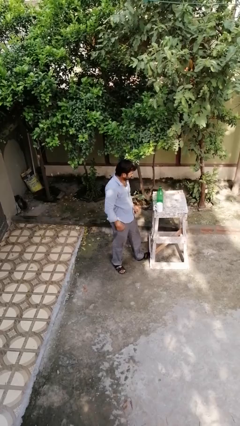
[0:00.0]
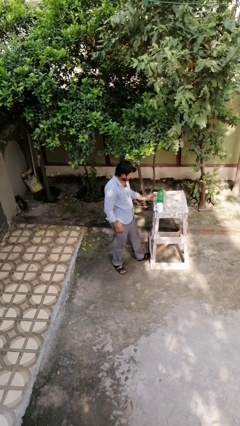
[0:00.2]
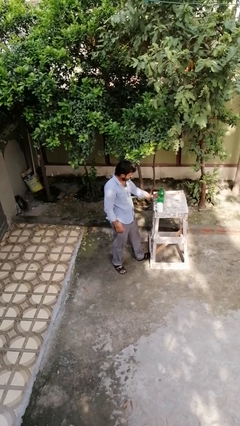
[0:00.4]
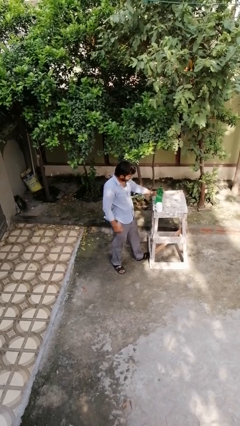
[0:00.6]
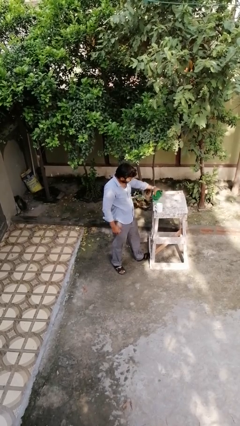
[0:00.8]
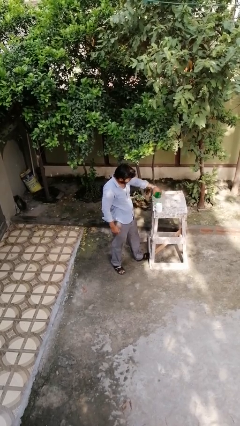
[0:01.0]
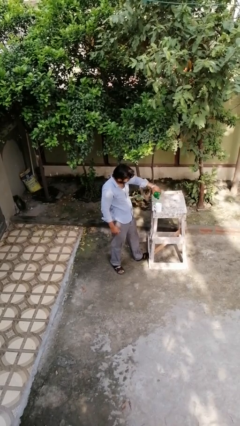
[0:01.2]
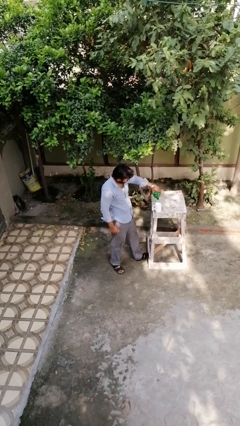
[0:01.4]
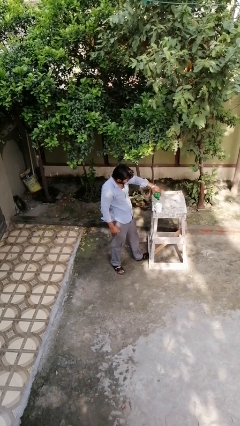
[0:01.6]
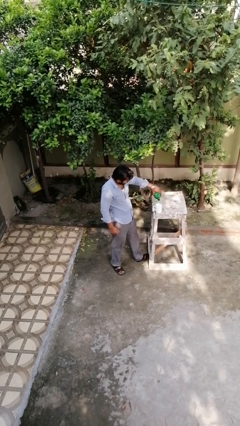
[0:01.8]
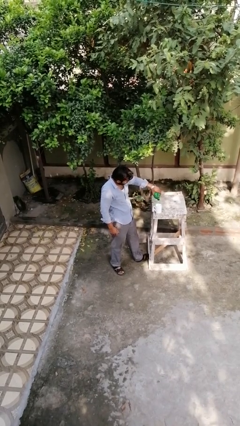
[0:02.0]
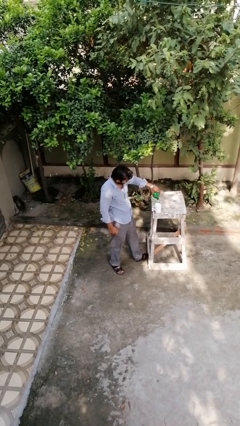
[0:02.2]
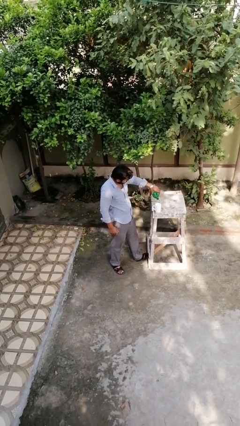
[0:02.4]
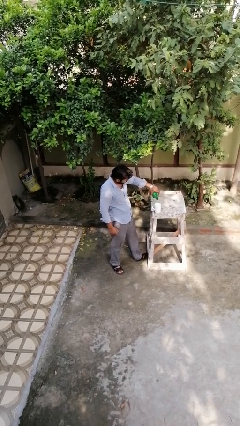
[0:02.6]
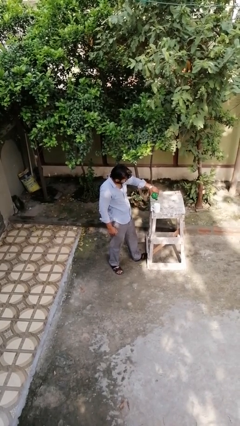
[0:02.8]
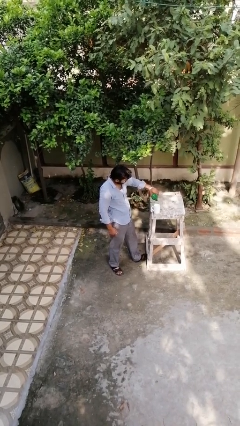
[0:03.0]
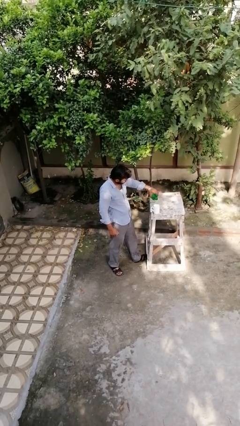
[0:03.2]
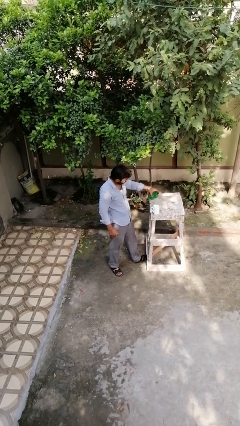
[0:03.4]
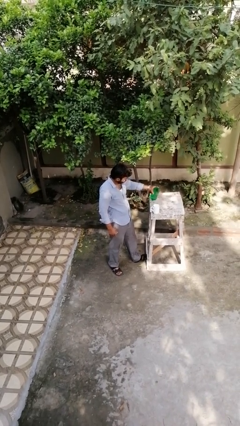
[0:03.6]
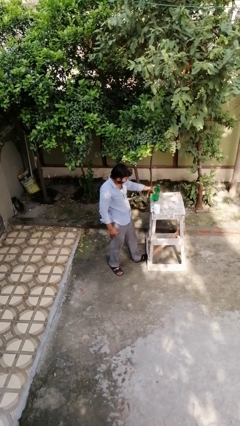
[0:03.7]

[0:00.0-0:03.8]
person pours liquid into cup

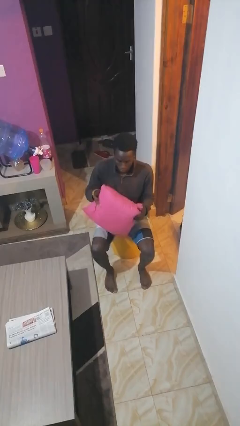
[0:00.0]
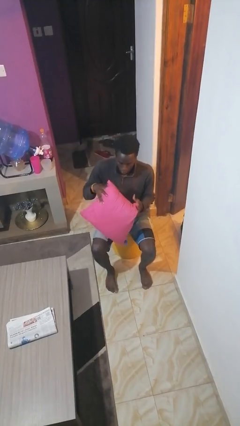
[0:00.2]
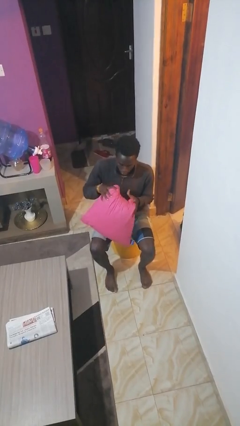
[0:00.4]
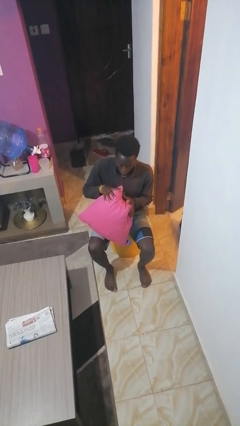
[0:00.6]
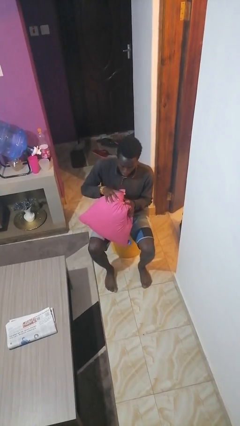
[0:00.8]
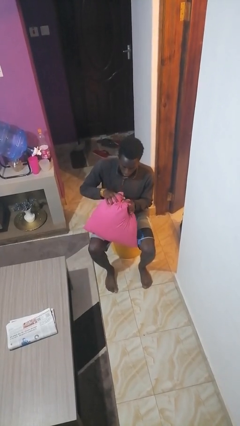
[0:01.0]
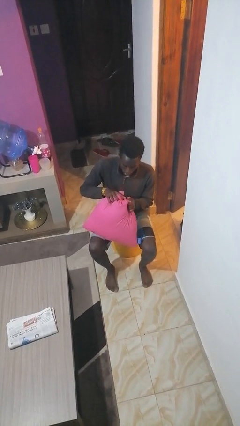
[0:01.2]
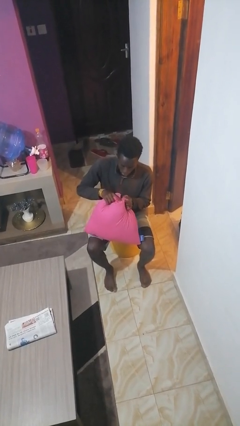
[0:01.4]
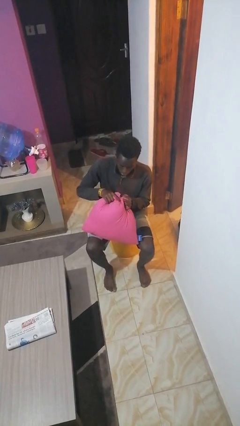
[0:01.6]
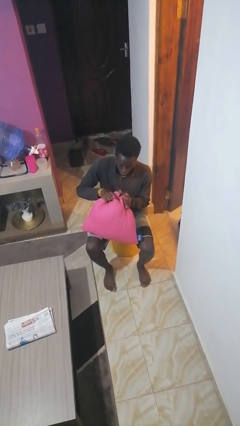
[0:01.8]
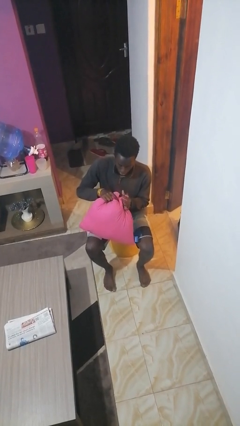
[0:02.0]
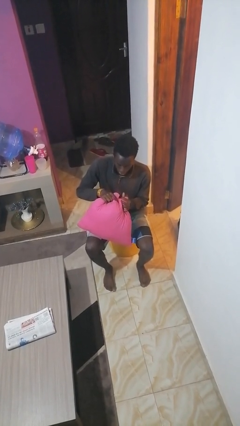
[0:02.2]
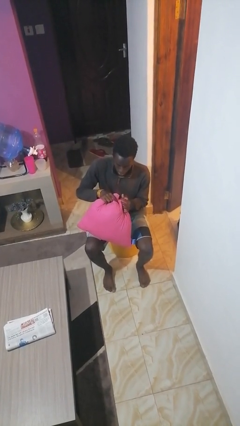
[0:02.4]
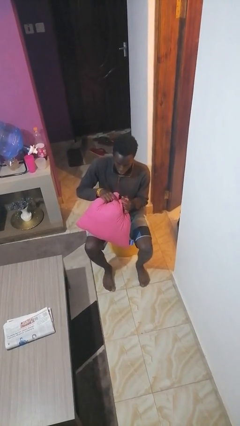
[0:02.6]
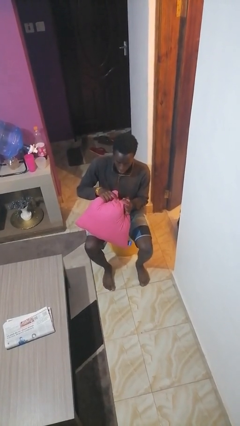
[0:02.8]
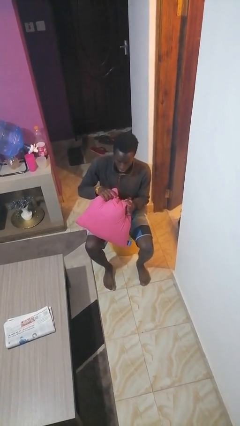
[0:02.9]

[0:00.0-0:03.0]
person squeezes object

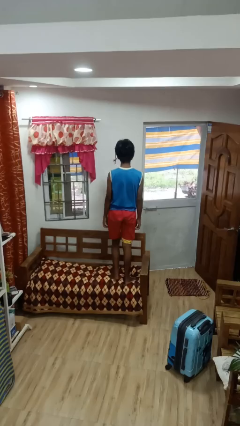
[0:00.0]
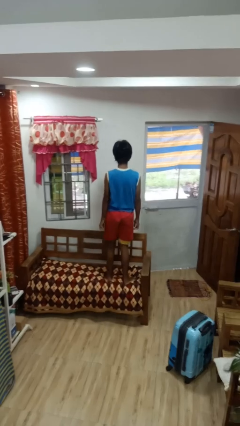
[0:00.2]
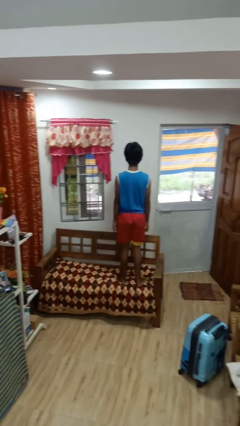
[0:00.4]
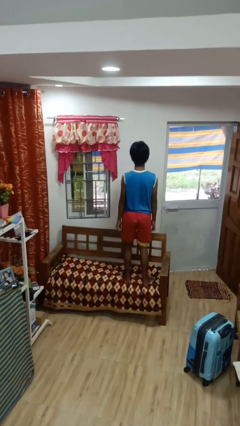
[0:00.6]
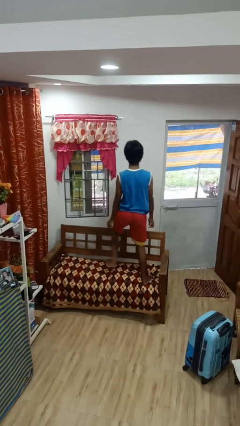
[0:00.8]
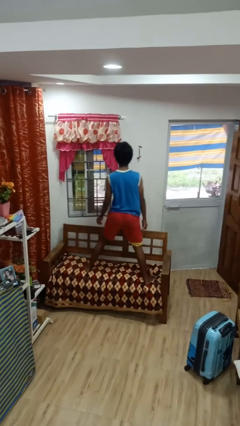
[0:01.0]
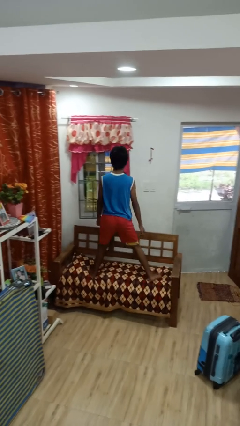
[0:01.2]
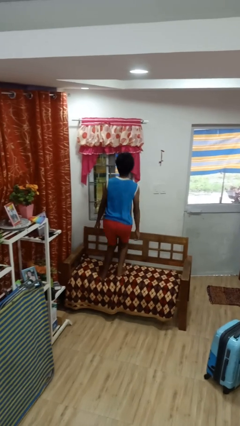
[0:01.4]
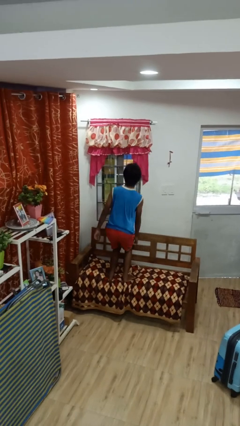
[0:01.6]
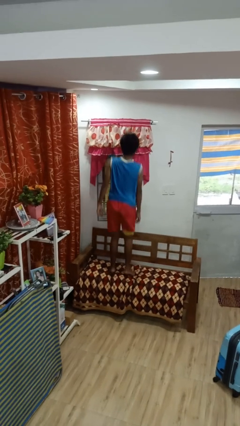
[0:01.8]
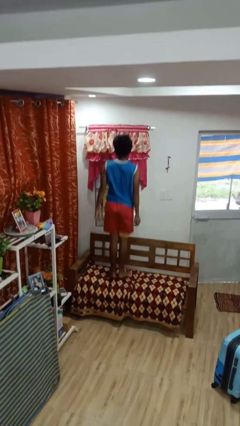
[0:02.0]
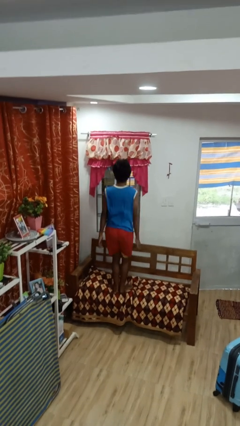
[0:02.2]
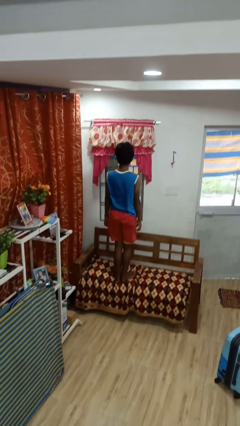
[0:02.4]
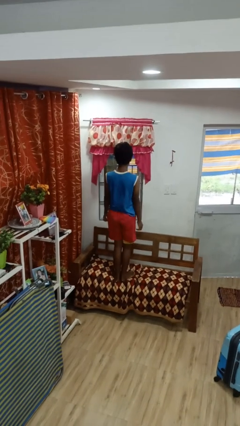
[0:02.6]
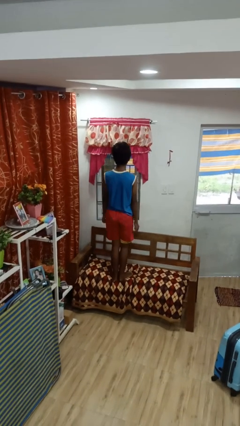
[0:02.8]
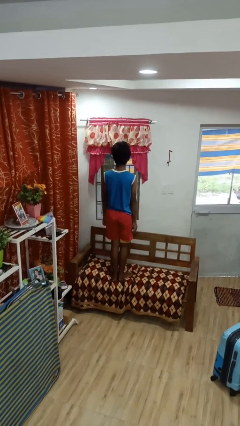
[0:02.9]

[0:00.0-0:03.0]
person jumps on couch

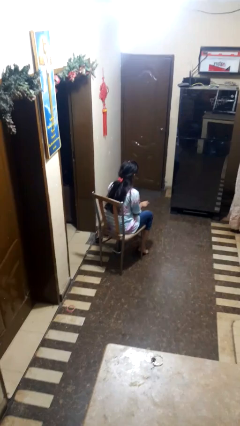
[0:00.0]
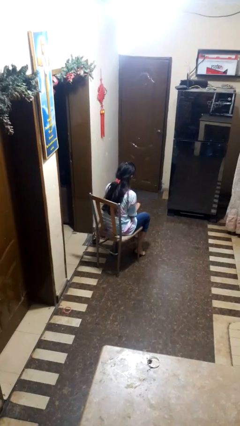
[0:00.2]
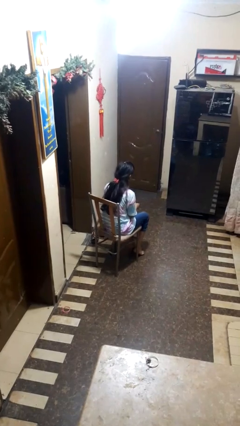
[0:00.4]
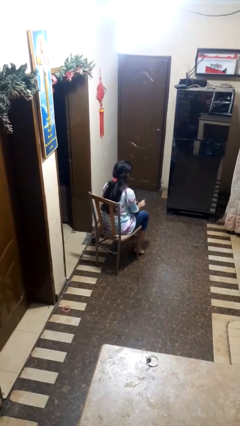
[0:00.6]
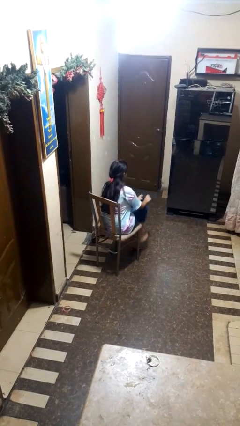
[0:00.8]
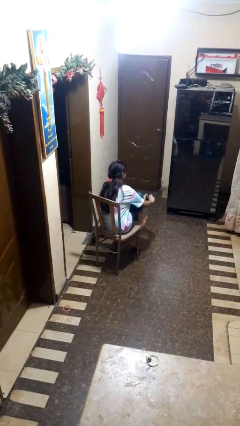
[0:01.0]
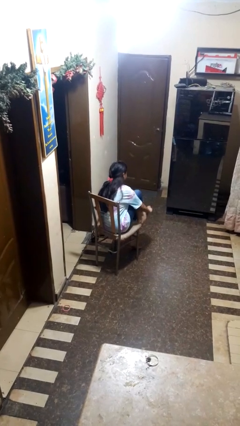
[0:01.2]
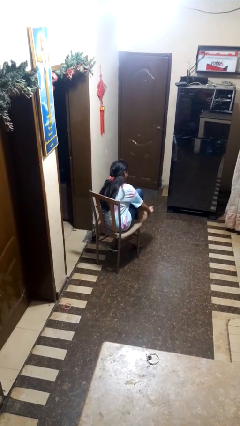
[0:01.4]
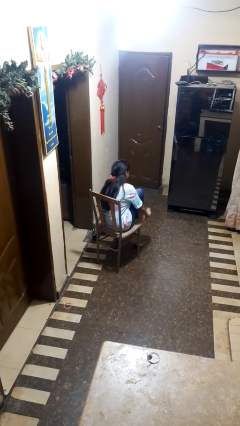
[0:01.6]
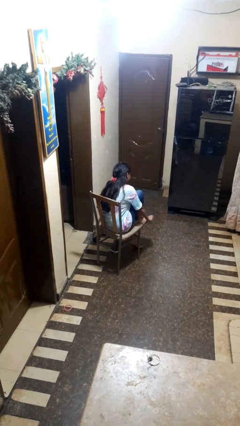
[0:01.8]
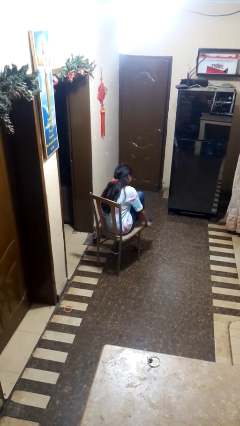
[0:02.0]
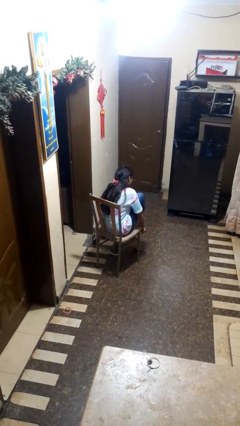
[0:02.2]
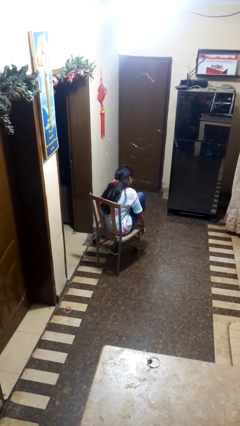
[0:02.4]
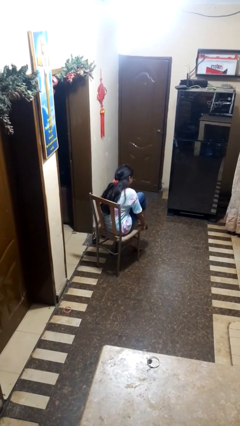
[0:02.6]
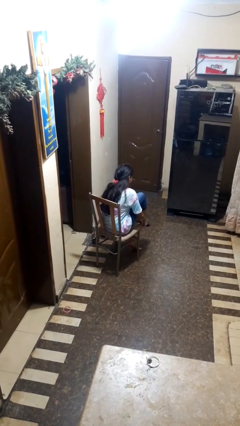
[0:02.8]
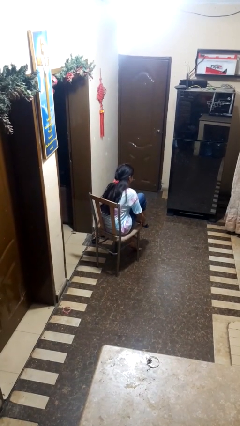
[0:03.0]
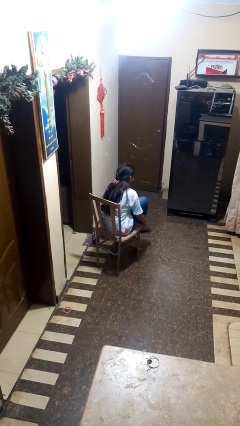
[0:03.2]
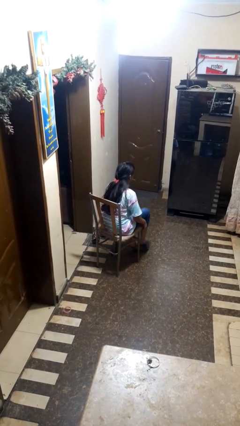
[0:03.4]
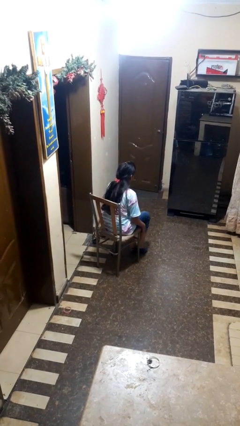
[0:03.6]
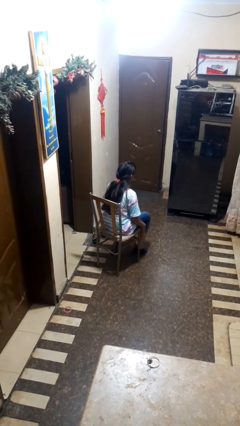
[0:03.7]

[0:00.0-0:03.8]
person puts on socks

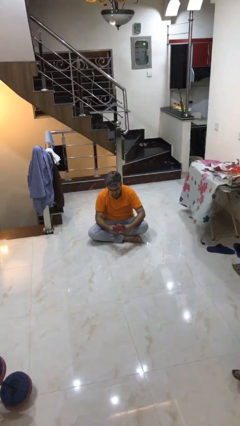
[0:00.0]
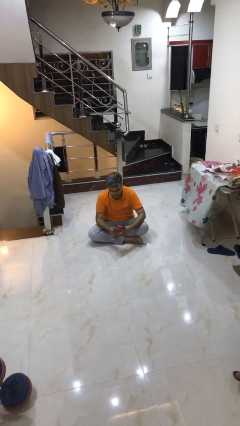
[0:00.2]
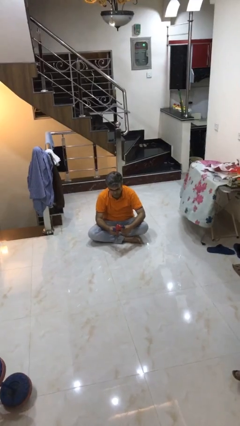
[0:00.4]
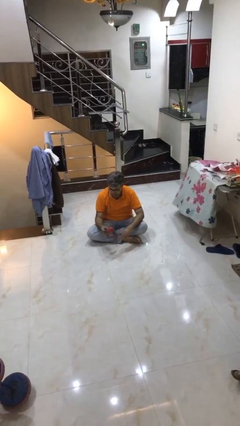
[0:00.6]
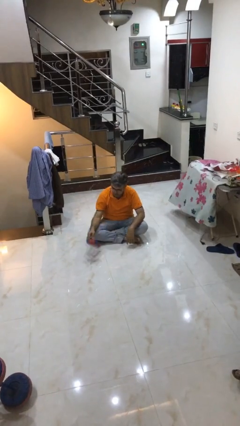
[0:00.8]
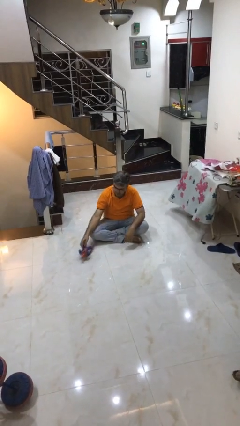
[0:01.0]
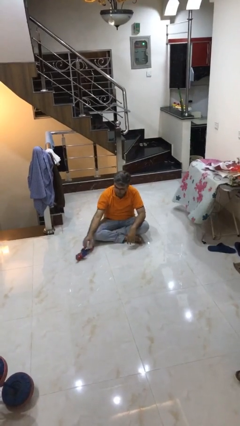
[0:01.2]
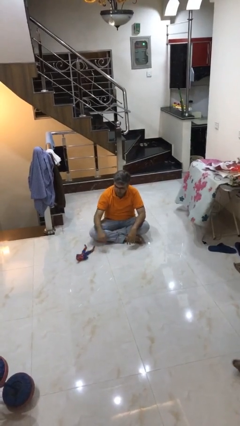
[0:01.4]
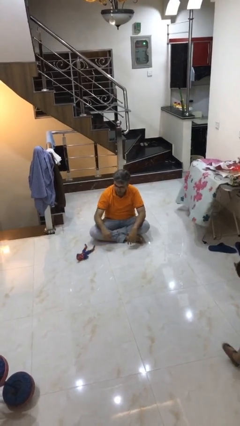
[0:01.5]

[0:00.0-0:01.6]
person puts down object on floor

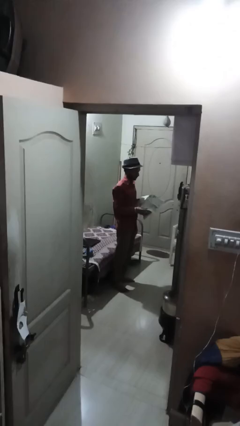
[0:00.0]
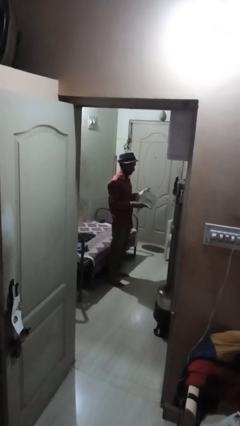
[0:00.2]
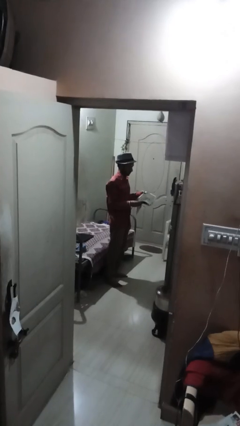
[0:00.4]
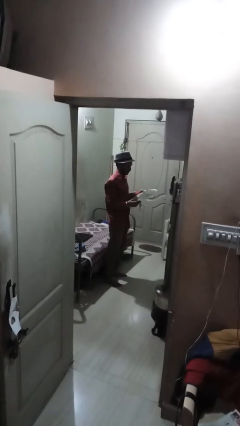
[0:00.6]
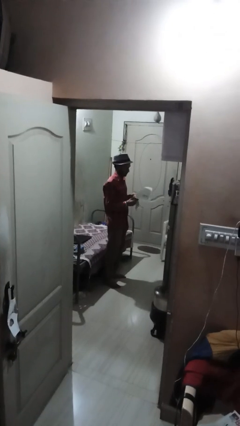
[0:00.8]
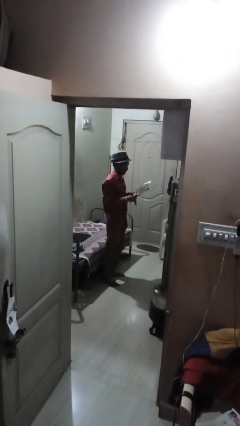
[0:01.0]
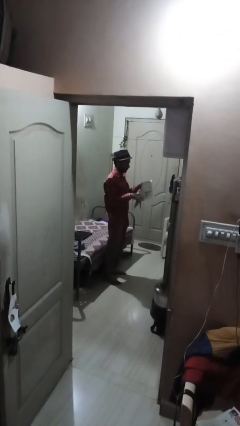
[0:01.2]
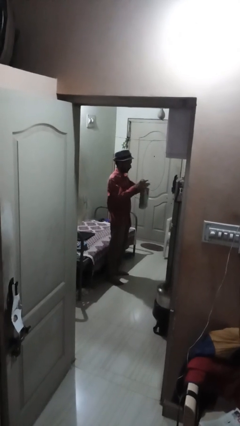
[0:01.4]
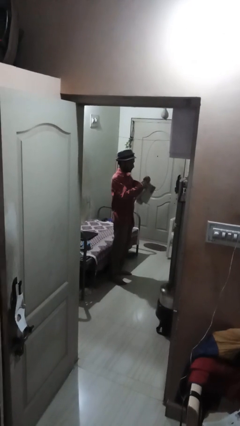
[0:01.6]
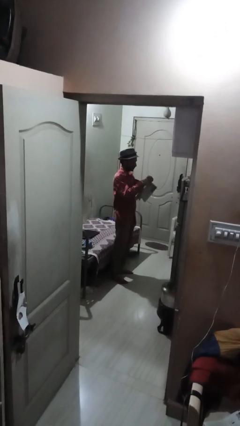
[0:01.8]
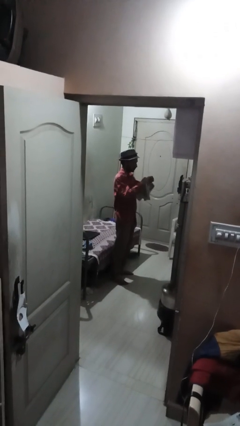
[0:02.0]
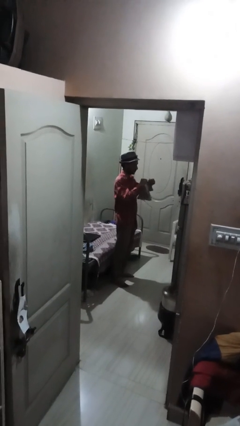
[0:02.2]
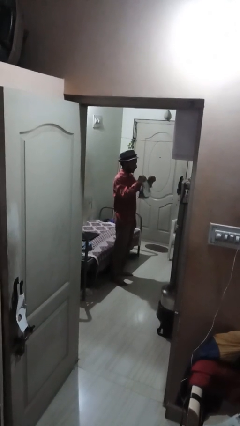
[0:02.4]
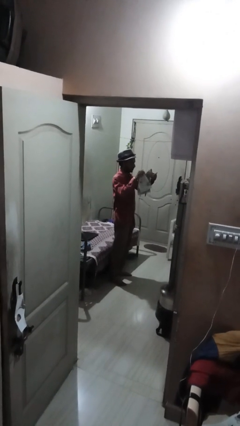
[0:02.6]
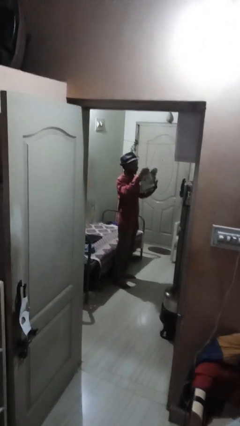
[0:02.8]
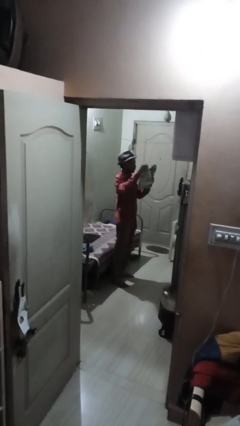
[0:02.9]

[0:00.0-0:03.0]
person tears paper
